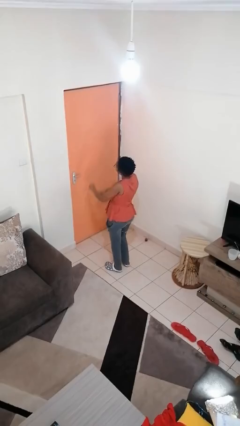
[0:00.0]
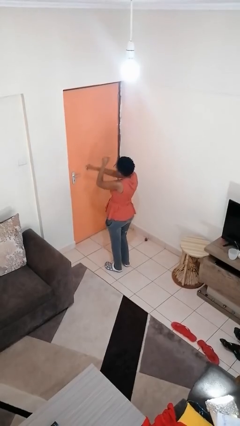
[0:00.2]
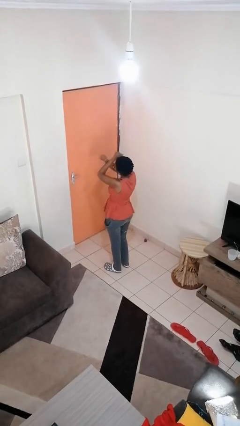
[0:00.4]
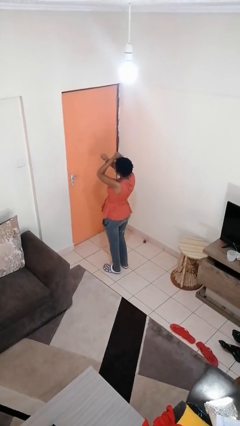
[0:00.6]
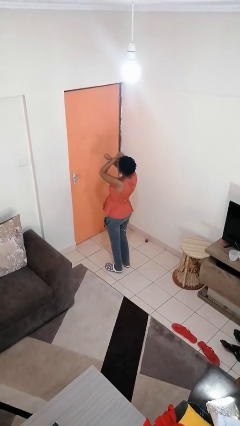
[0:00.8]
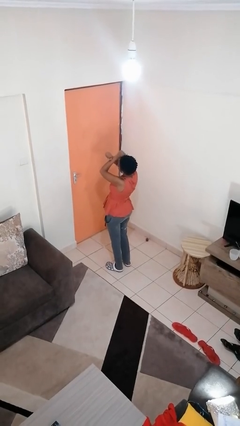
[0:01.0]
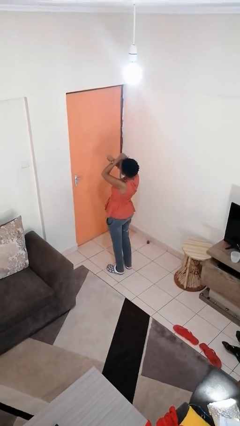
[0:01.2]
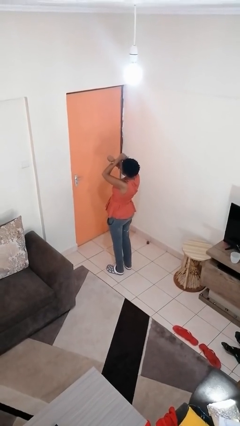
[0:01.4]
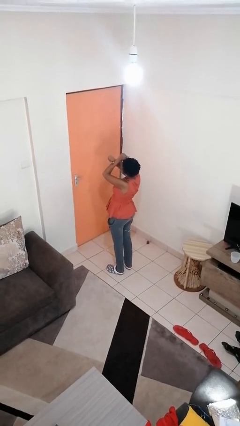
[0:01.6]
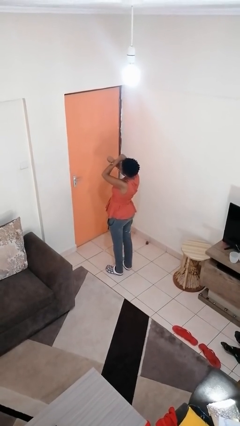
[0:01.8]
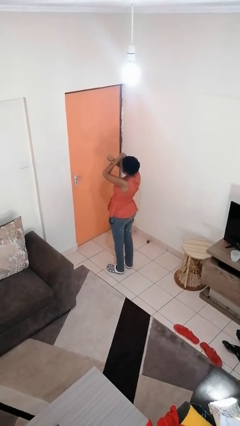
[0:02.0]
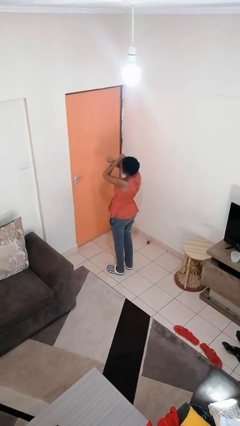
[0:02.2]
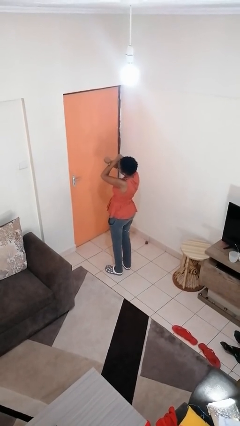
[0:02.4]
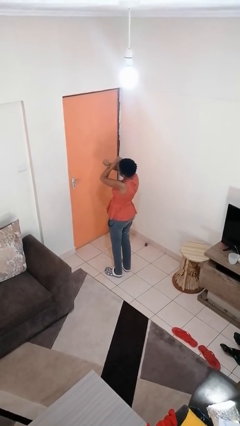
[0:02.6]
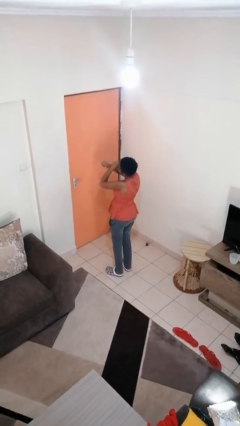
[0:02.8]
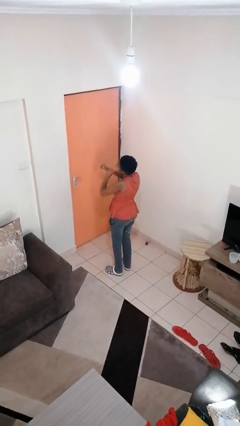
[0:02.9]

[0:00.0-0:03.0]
person gestures arms x

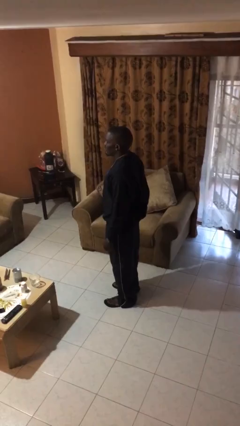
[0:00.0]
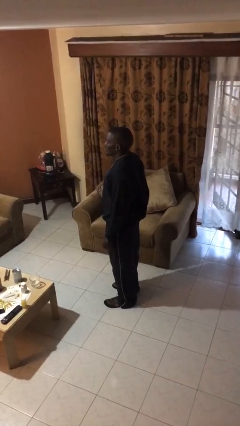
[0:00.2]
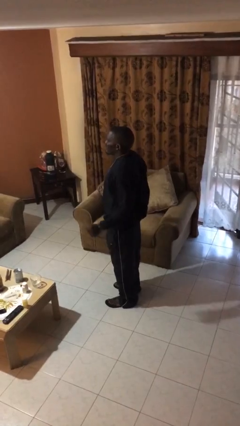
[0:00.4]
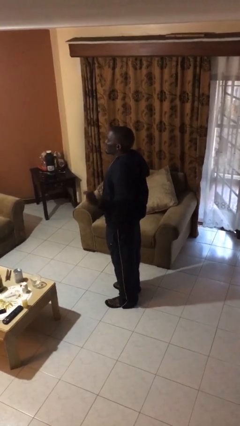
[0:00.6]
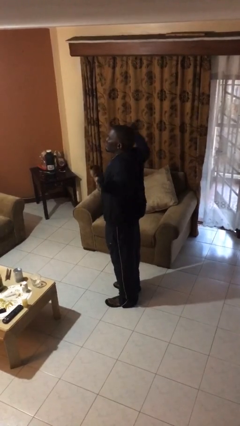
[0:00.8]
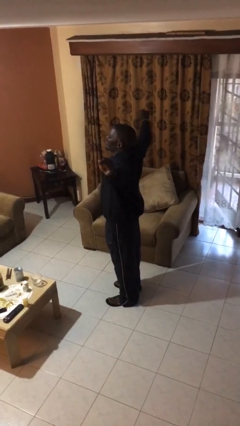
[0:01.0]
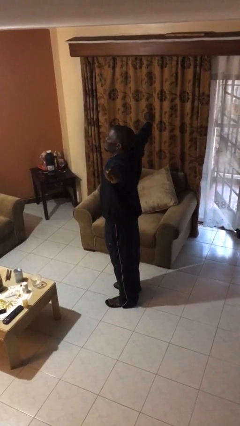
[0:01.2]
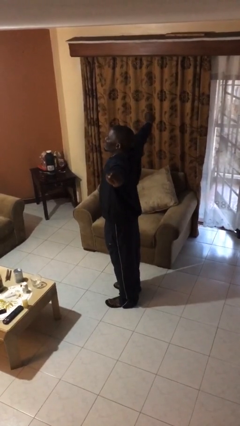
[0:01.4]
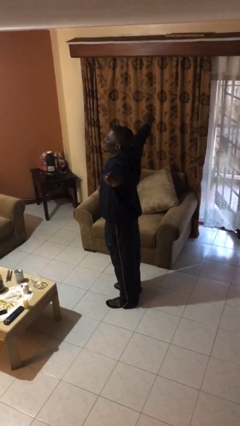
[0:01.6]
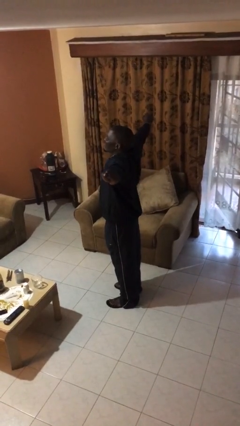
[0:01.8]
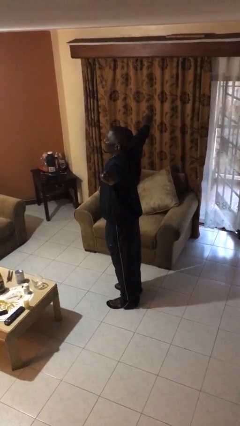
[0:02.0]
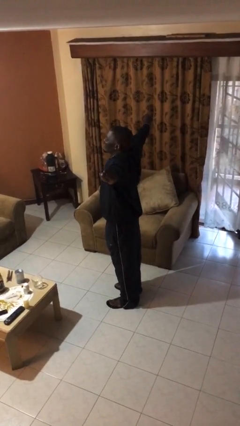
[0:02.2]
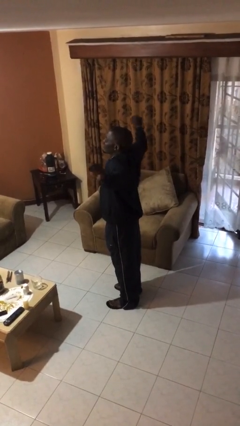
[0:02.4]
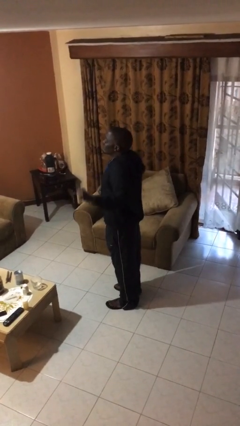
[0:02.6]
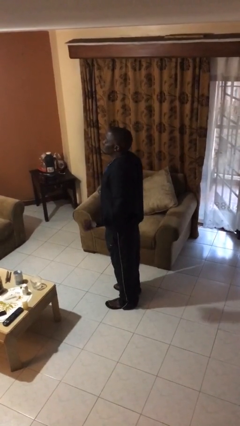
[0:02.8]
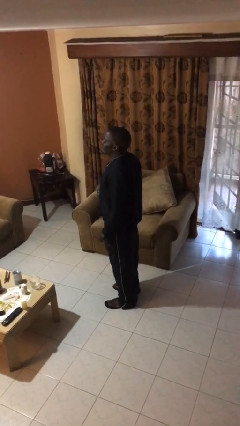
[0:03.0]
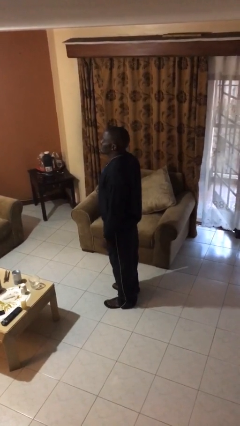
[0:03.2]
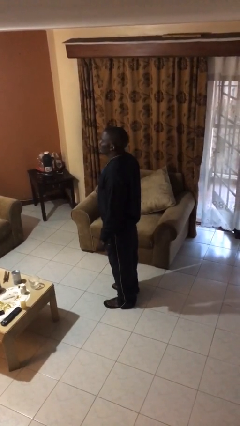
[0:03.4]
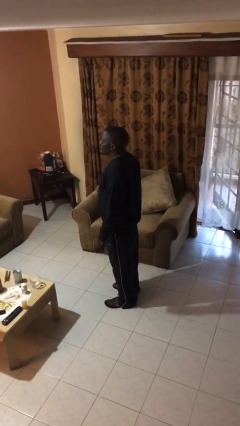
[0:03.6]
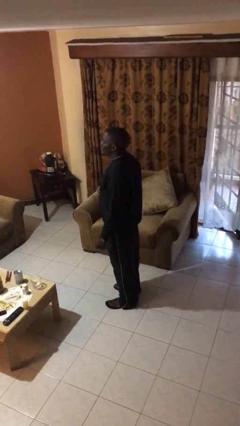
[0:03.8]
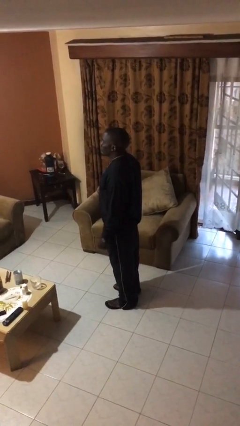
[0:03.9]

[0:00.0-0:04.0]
person stretches arms to side

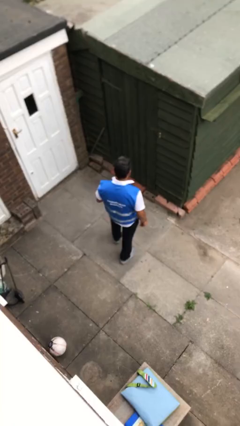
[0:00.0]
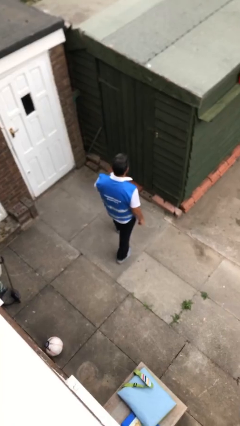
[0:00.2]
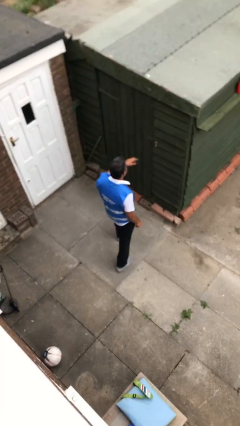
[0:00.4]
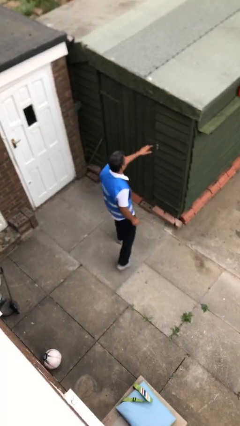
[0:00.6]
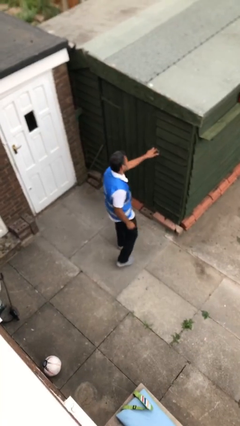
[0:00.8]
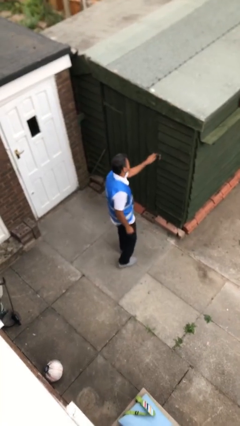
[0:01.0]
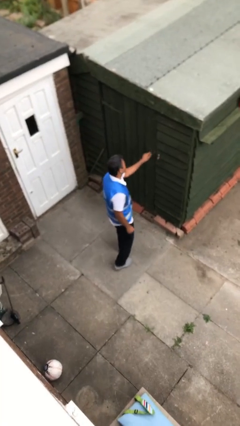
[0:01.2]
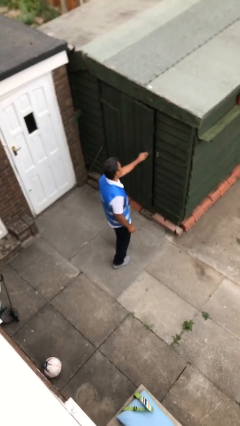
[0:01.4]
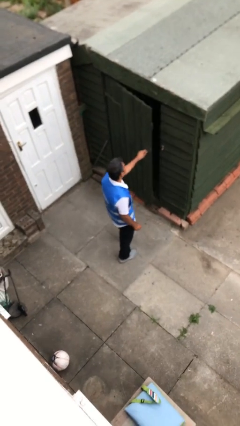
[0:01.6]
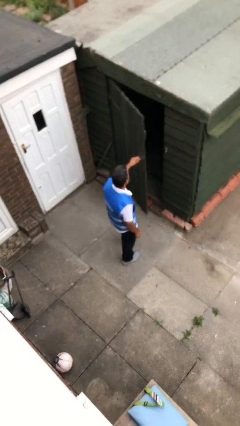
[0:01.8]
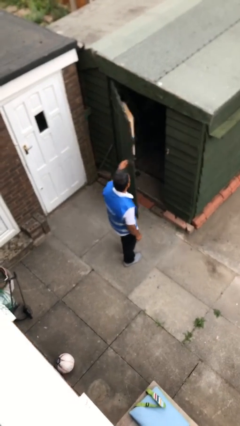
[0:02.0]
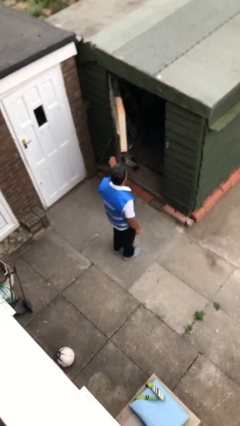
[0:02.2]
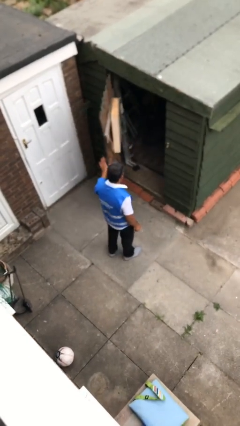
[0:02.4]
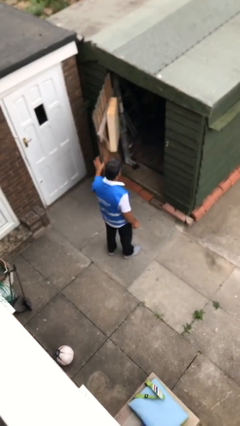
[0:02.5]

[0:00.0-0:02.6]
person opens facility door

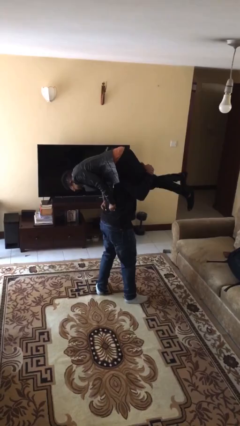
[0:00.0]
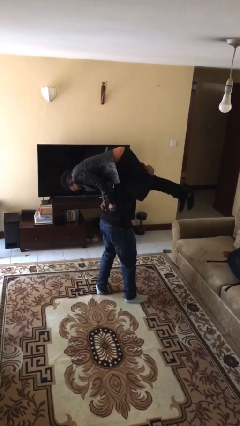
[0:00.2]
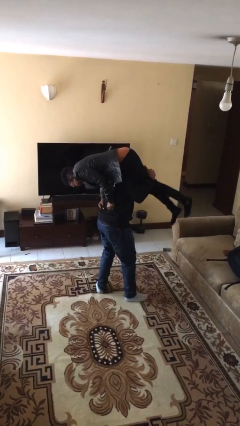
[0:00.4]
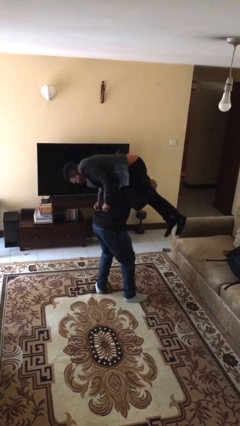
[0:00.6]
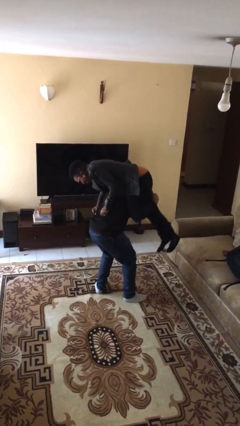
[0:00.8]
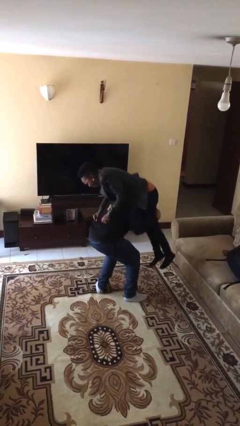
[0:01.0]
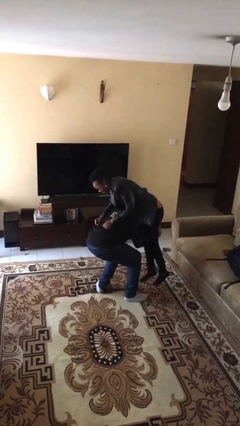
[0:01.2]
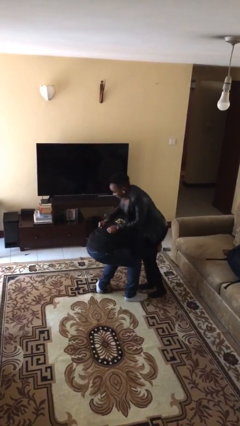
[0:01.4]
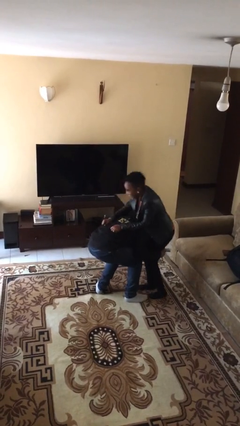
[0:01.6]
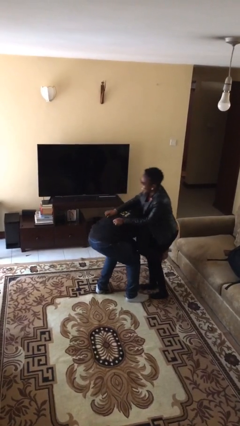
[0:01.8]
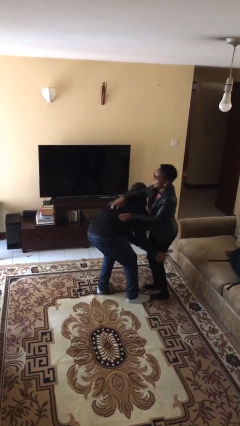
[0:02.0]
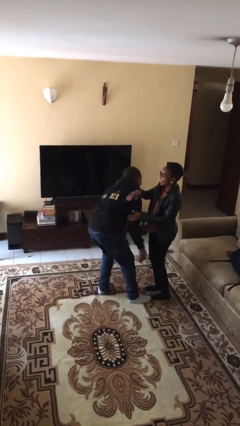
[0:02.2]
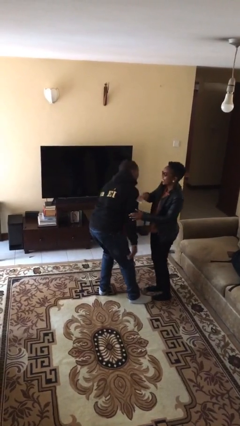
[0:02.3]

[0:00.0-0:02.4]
person puts down person

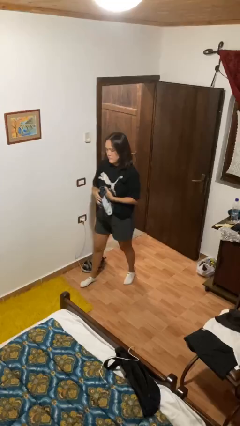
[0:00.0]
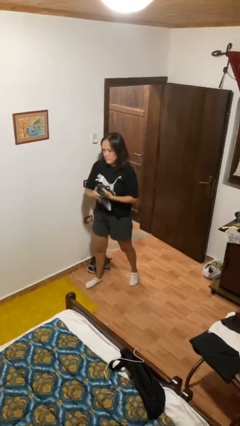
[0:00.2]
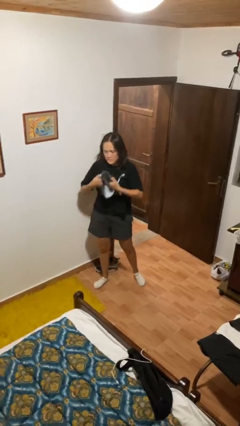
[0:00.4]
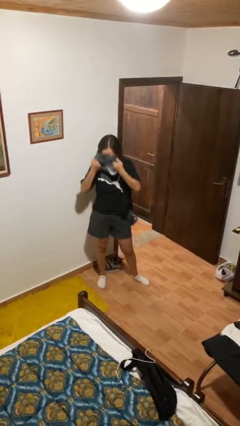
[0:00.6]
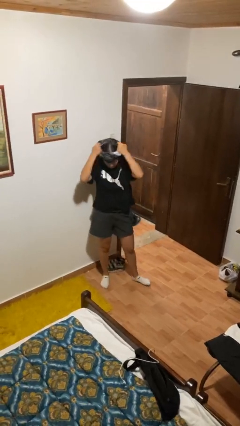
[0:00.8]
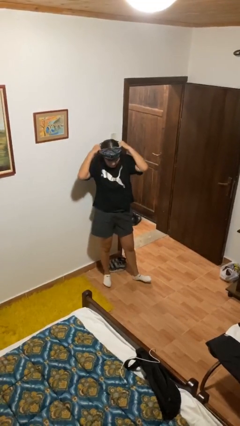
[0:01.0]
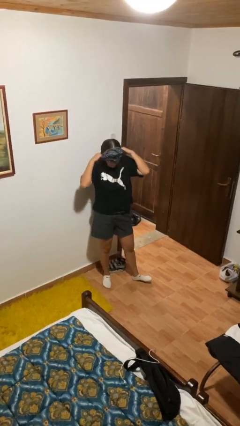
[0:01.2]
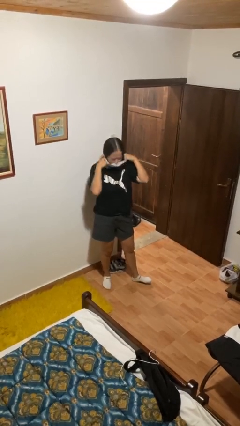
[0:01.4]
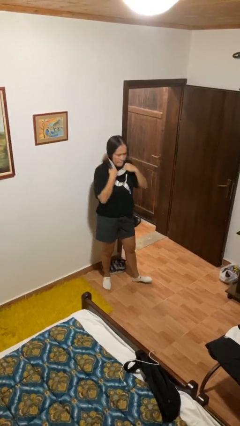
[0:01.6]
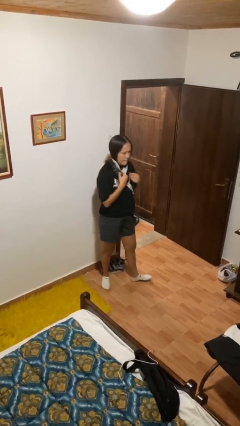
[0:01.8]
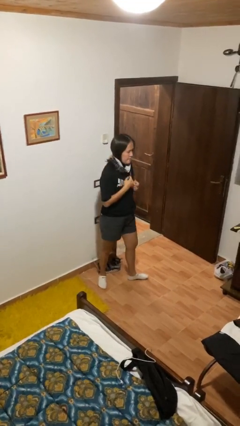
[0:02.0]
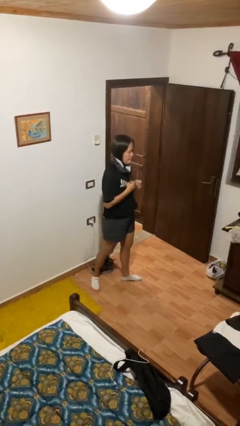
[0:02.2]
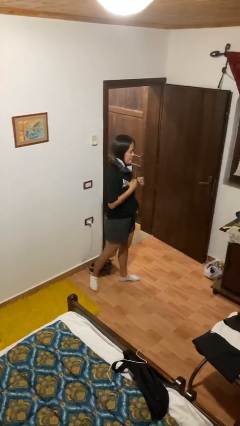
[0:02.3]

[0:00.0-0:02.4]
person puts on scarf

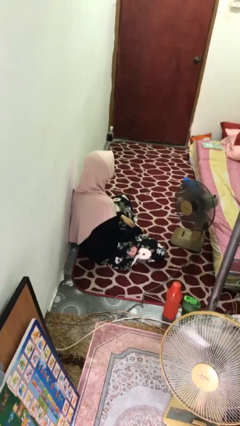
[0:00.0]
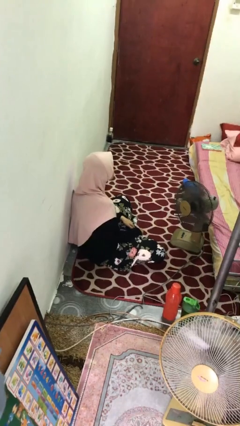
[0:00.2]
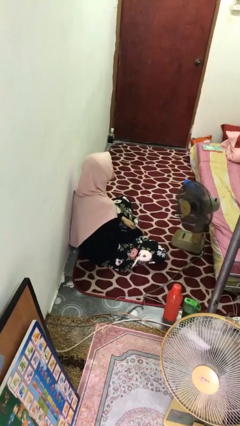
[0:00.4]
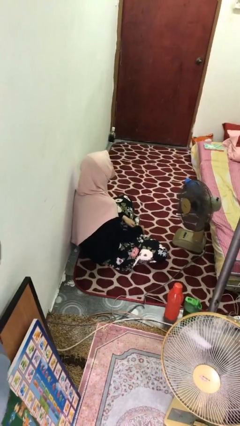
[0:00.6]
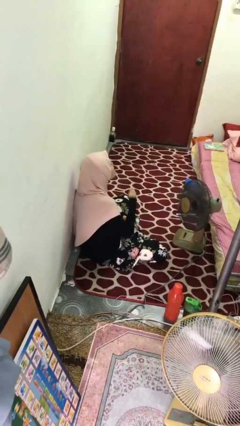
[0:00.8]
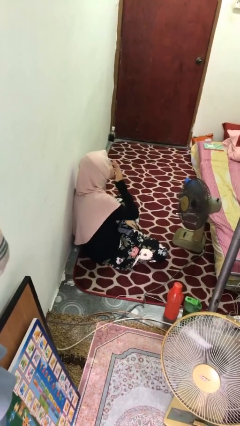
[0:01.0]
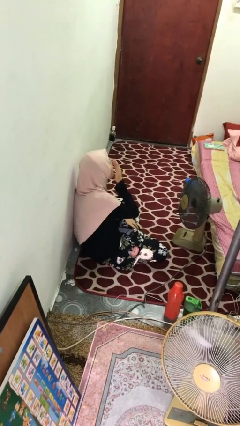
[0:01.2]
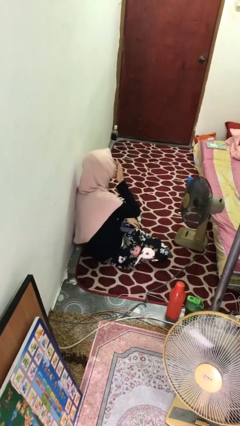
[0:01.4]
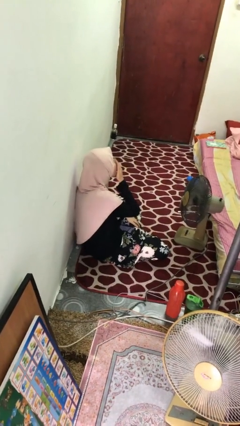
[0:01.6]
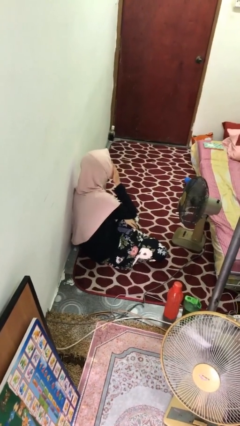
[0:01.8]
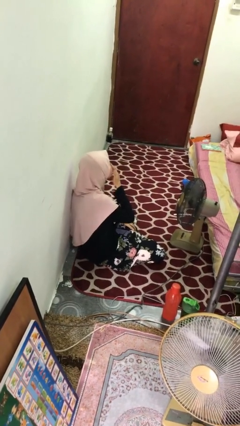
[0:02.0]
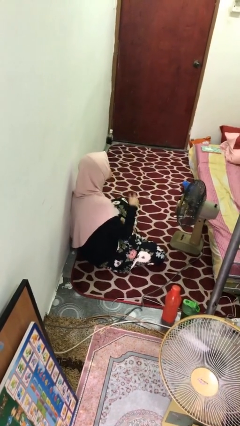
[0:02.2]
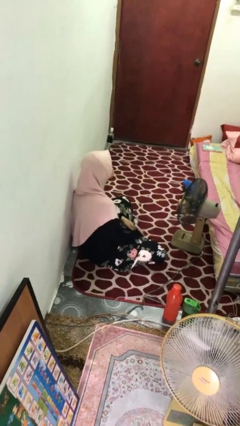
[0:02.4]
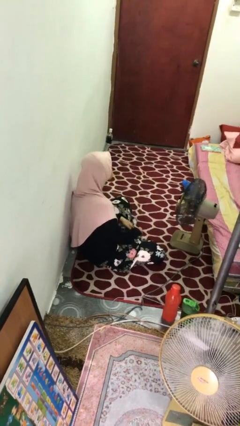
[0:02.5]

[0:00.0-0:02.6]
person yawns
